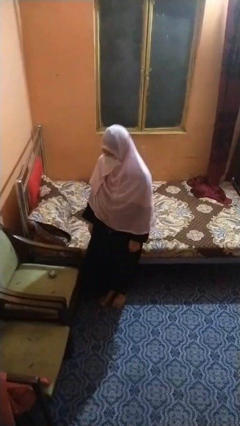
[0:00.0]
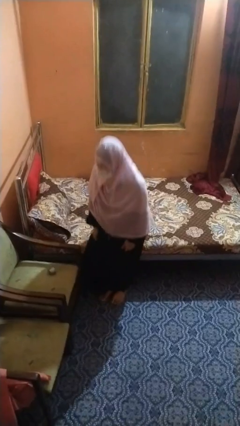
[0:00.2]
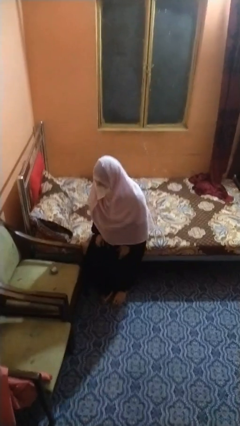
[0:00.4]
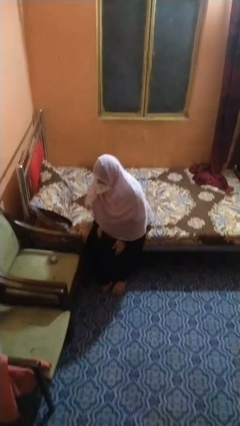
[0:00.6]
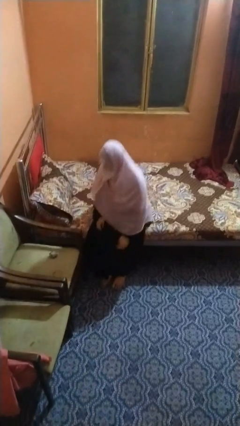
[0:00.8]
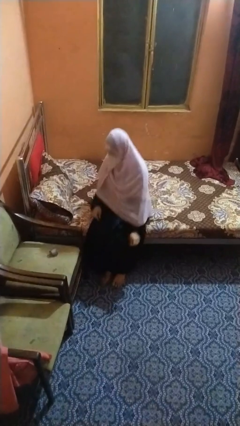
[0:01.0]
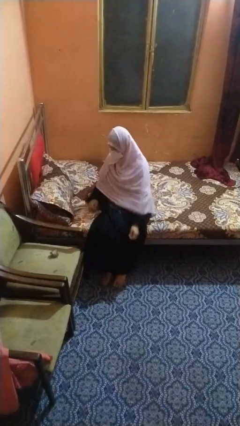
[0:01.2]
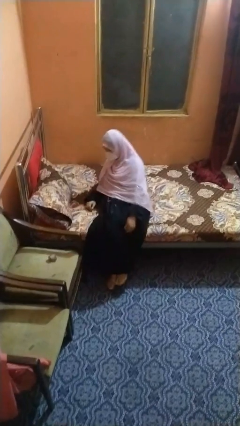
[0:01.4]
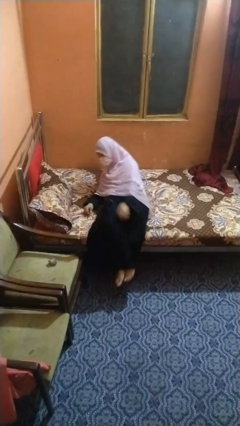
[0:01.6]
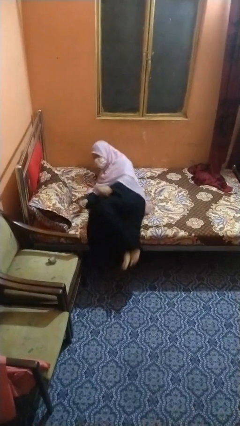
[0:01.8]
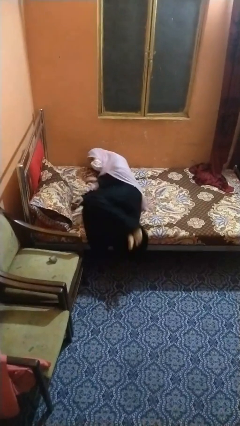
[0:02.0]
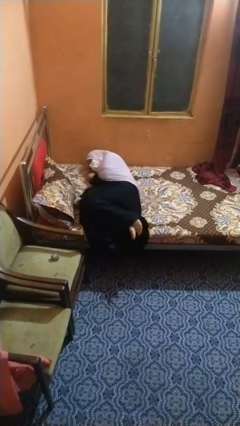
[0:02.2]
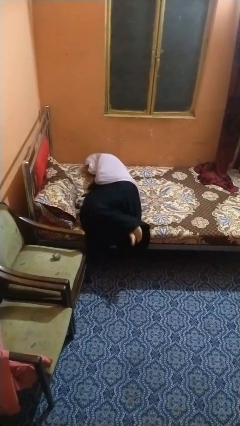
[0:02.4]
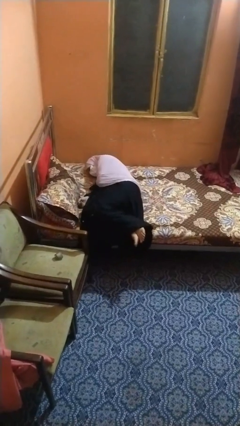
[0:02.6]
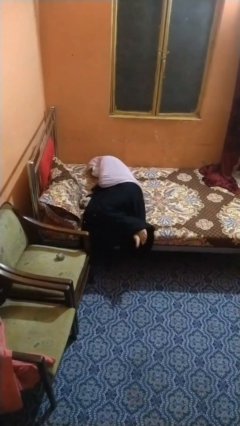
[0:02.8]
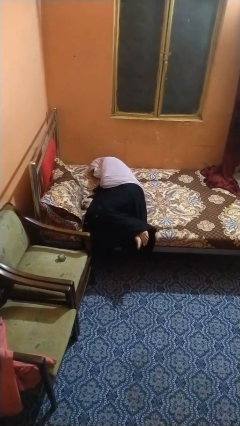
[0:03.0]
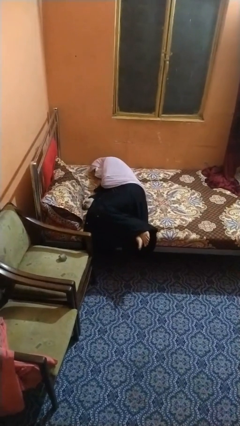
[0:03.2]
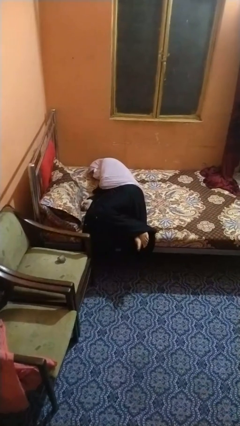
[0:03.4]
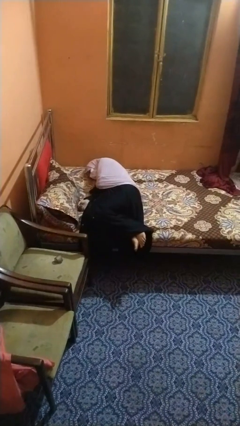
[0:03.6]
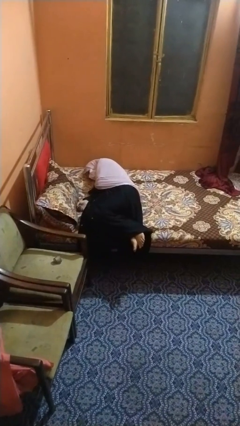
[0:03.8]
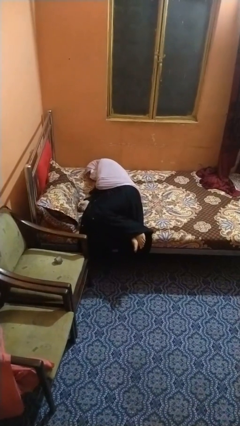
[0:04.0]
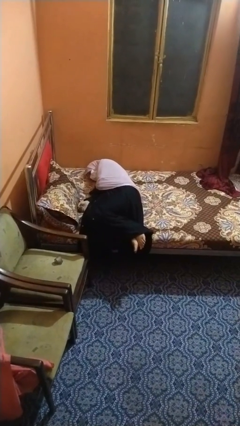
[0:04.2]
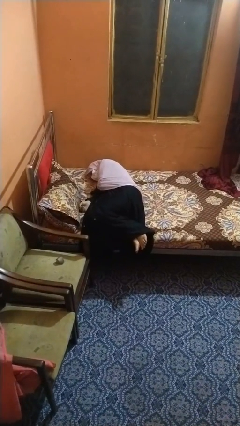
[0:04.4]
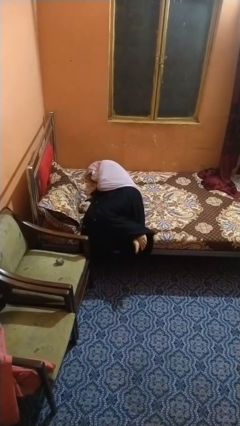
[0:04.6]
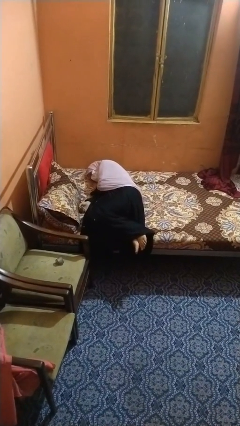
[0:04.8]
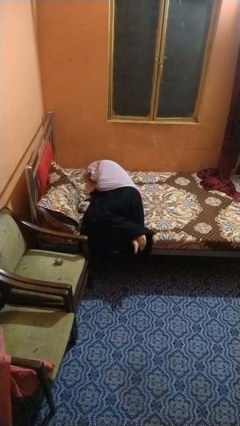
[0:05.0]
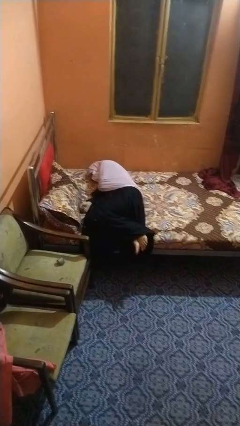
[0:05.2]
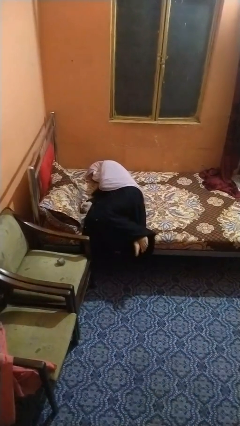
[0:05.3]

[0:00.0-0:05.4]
person lies down on bed

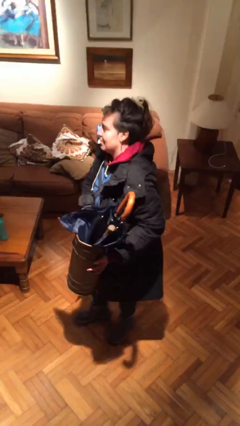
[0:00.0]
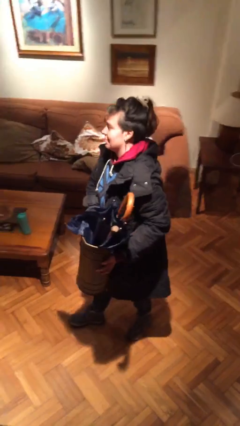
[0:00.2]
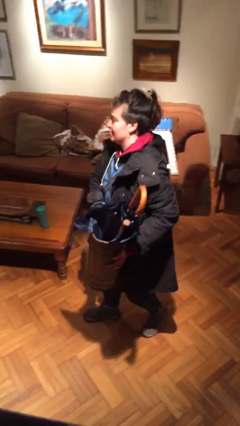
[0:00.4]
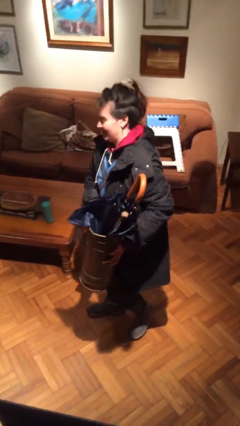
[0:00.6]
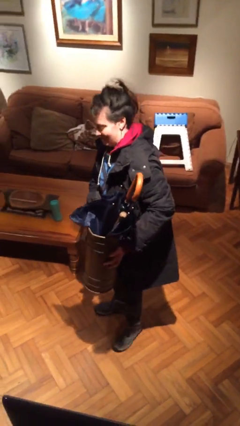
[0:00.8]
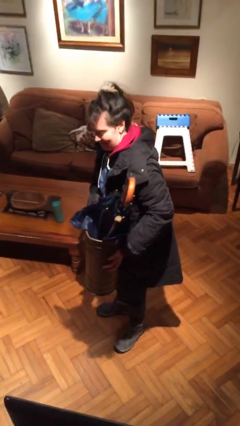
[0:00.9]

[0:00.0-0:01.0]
person puts down object on floor

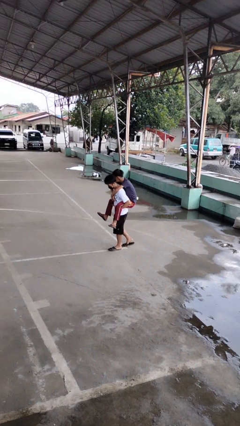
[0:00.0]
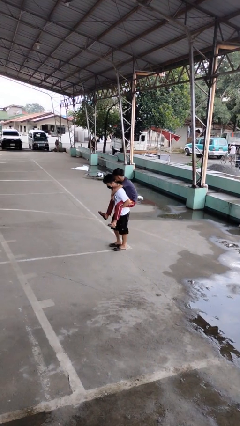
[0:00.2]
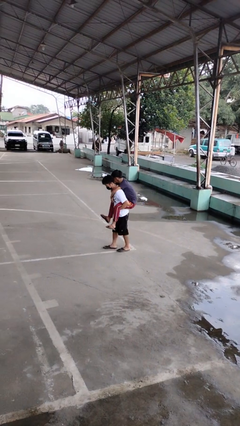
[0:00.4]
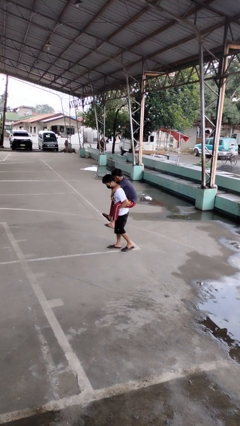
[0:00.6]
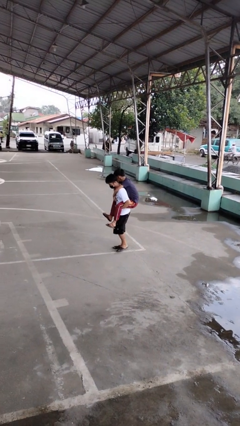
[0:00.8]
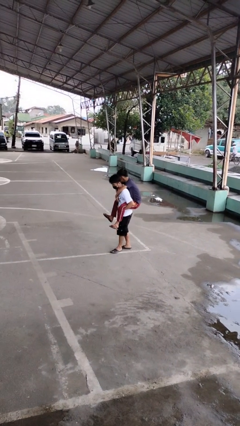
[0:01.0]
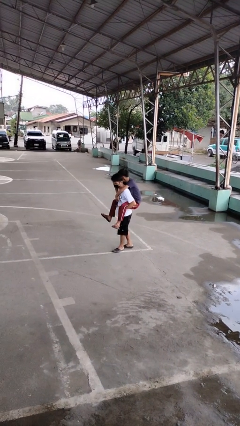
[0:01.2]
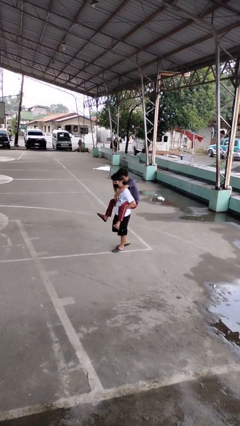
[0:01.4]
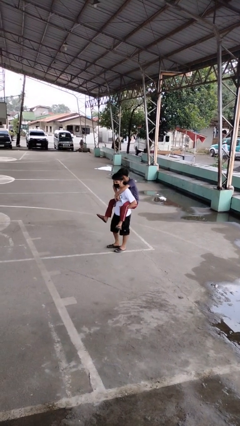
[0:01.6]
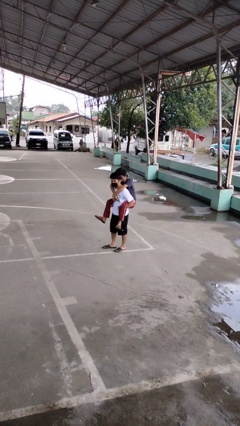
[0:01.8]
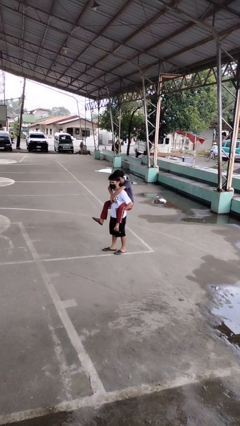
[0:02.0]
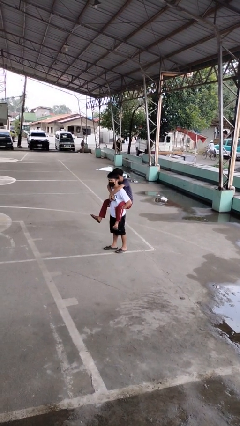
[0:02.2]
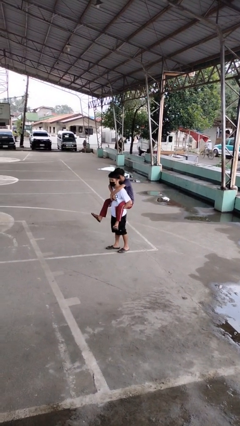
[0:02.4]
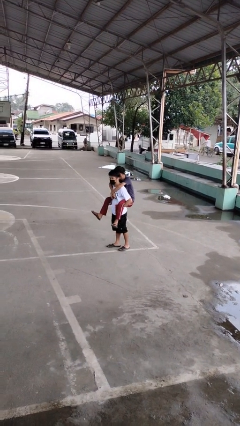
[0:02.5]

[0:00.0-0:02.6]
person carries person on back

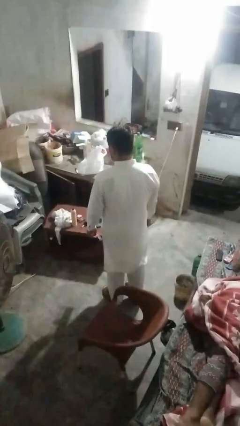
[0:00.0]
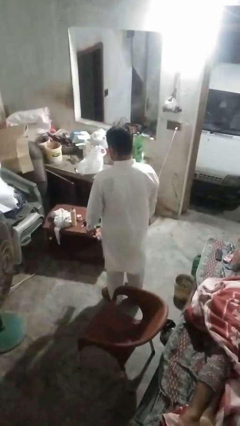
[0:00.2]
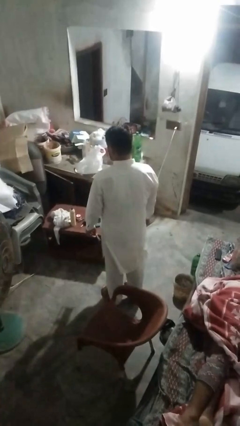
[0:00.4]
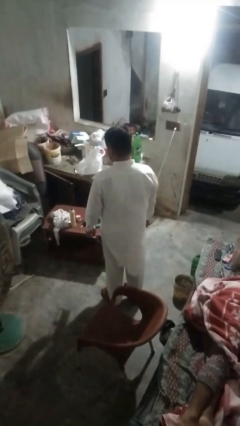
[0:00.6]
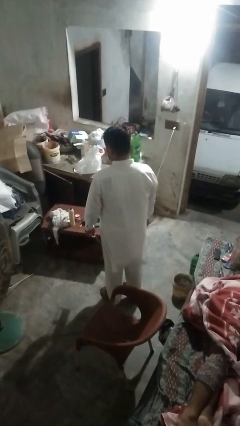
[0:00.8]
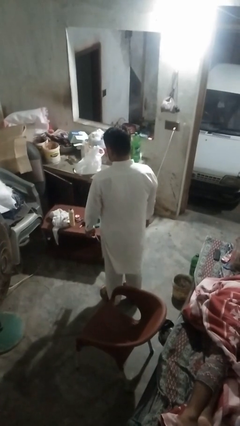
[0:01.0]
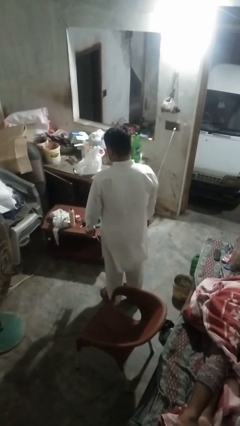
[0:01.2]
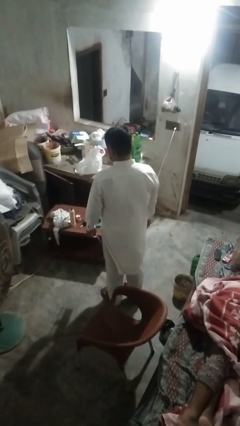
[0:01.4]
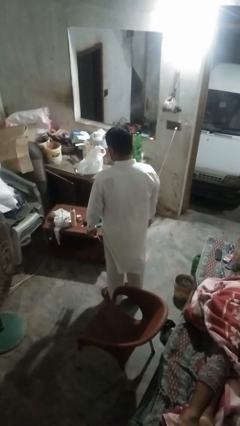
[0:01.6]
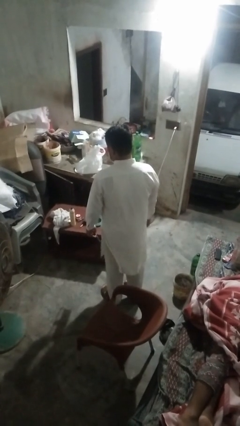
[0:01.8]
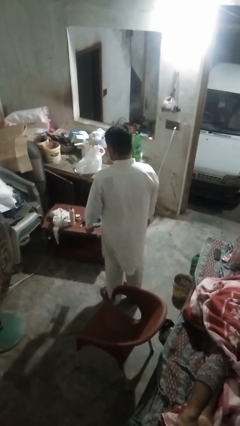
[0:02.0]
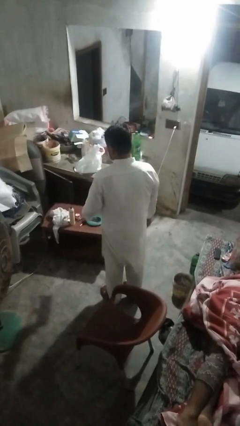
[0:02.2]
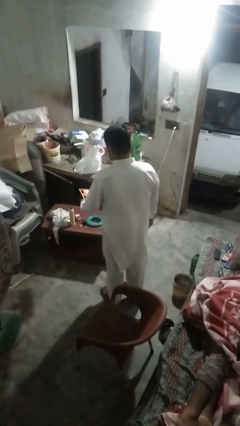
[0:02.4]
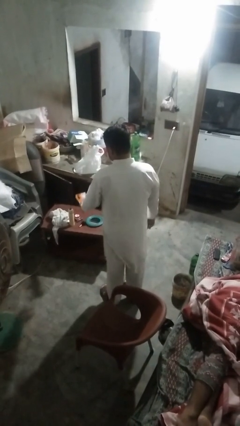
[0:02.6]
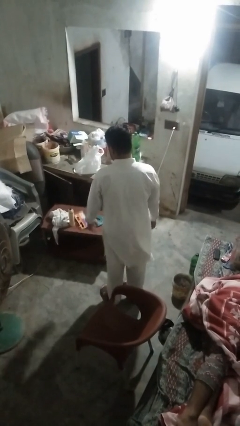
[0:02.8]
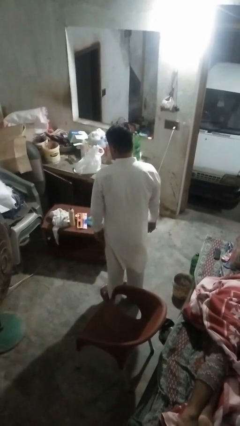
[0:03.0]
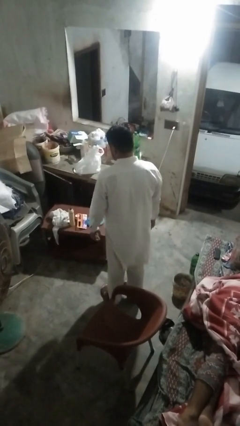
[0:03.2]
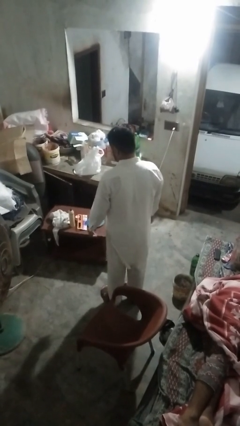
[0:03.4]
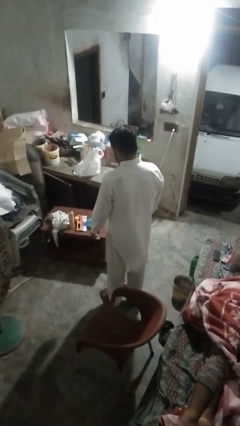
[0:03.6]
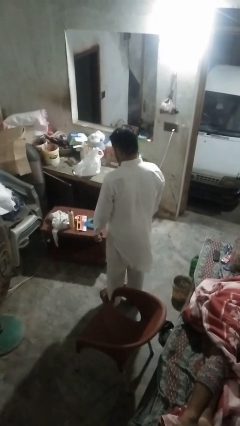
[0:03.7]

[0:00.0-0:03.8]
person throws object on table

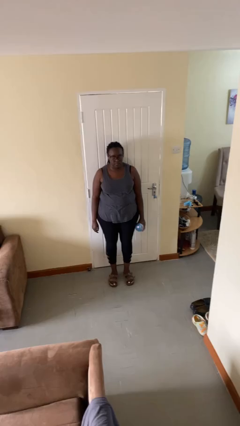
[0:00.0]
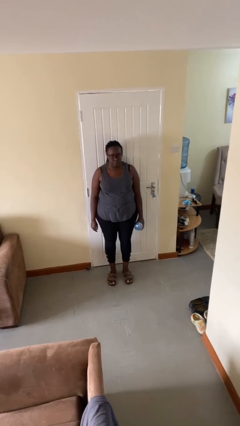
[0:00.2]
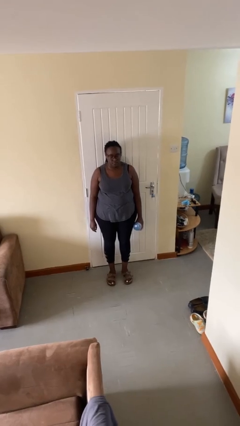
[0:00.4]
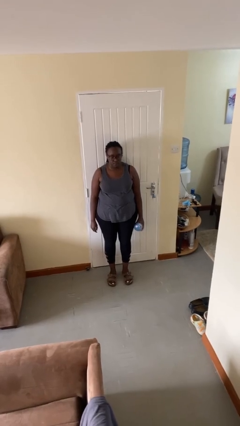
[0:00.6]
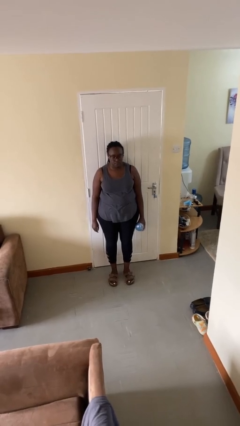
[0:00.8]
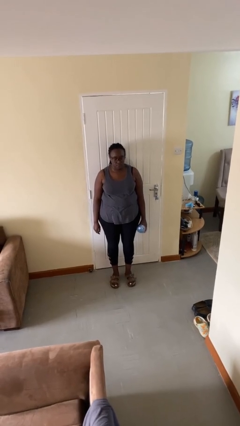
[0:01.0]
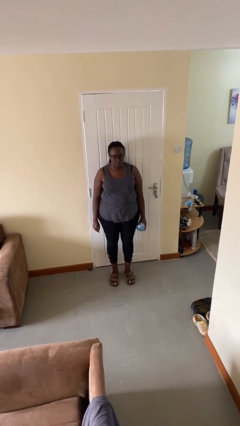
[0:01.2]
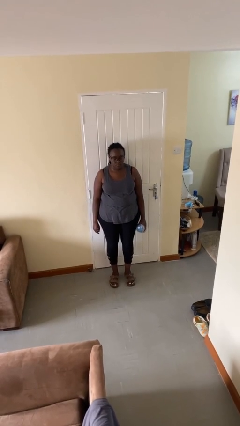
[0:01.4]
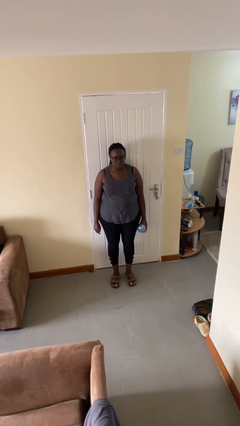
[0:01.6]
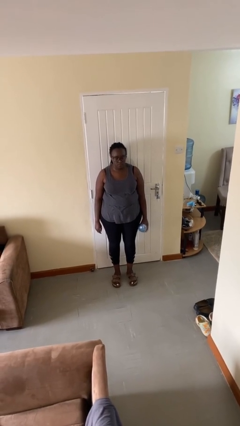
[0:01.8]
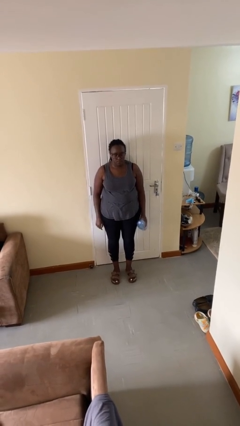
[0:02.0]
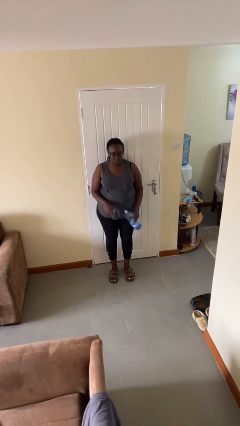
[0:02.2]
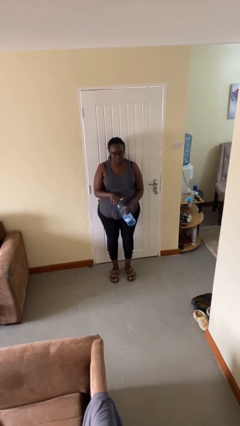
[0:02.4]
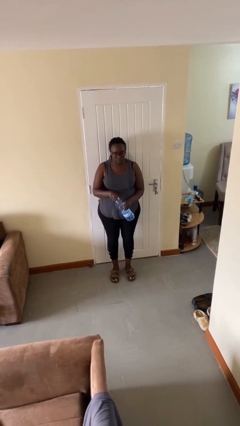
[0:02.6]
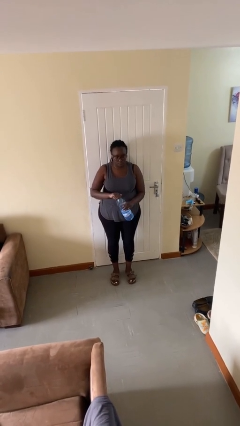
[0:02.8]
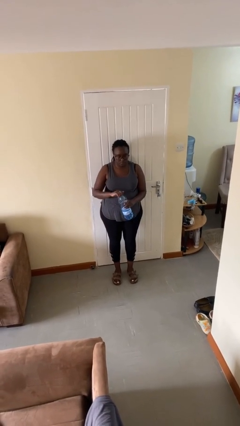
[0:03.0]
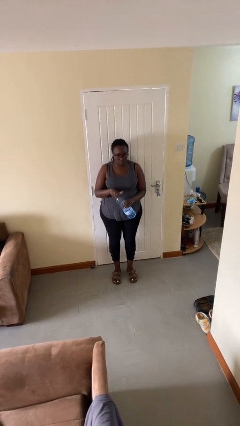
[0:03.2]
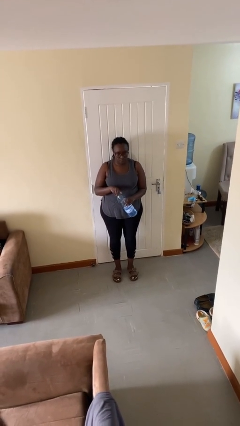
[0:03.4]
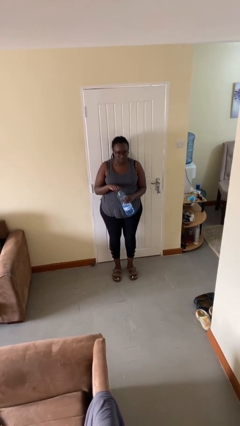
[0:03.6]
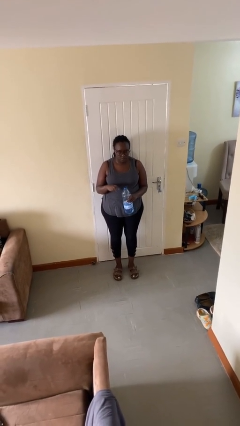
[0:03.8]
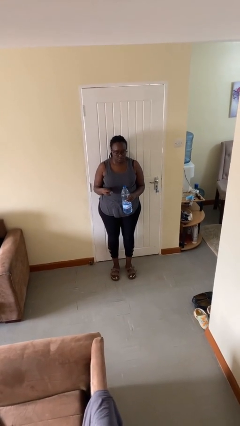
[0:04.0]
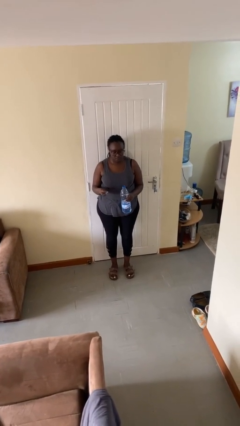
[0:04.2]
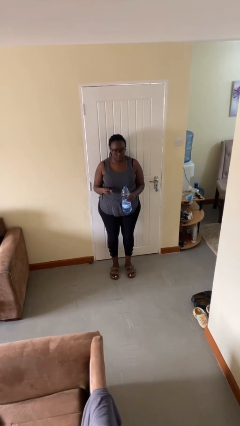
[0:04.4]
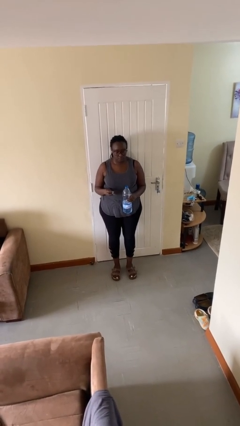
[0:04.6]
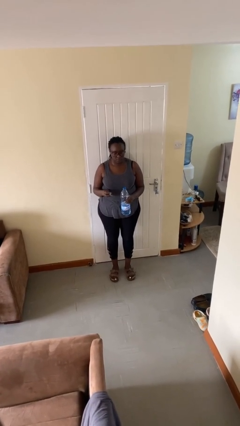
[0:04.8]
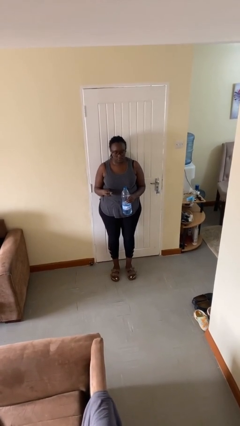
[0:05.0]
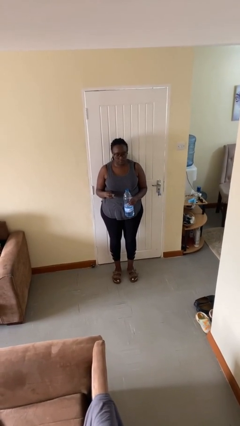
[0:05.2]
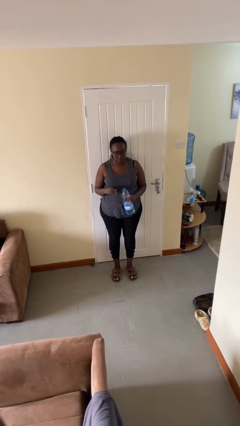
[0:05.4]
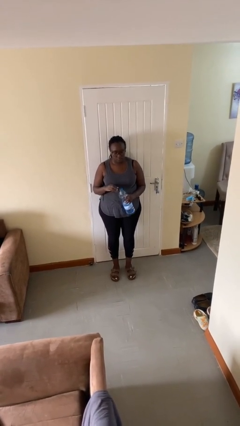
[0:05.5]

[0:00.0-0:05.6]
person unscrews lid from bottle
